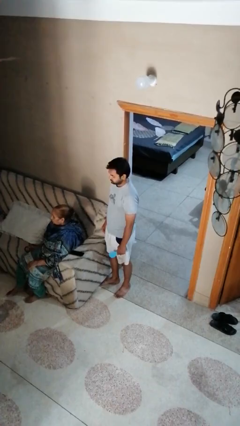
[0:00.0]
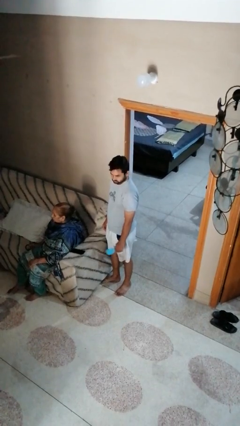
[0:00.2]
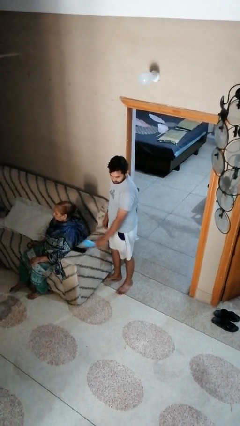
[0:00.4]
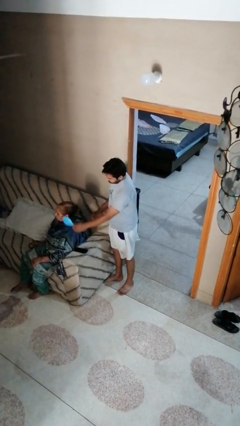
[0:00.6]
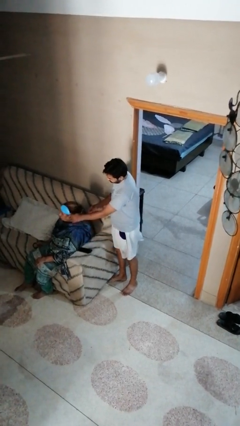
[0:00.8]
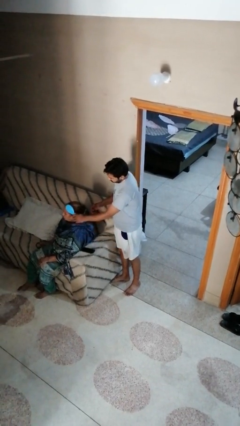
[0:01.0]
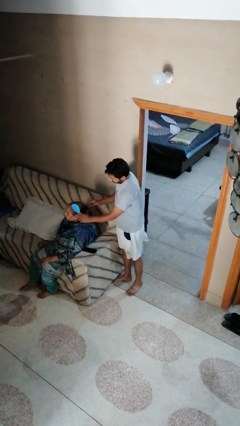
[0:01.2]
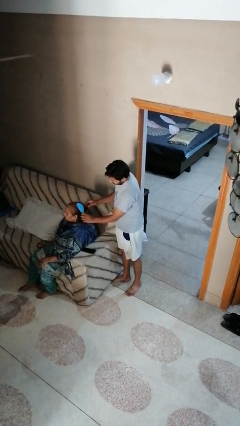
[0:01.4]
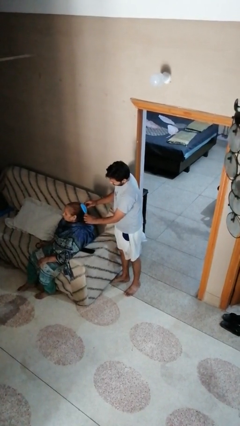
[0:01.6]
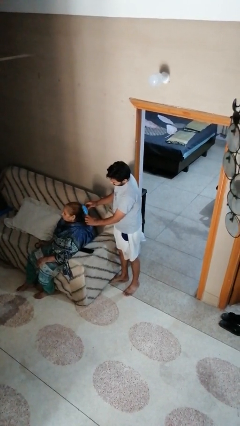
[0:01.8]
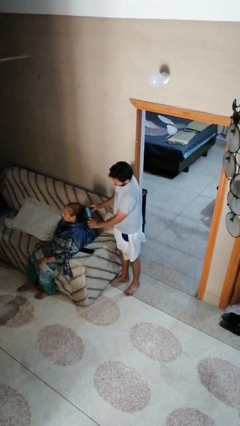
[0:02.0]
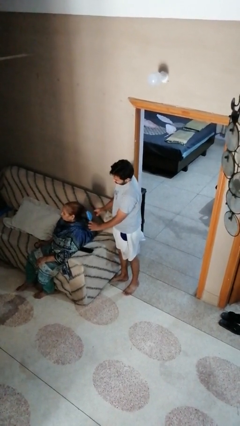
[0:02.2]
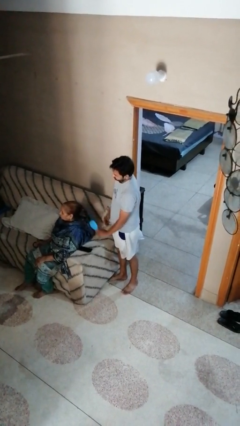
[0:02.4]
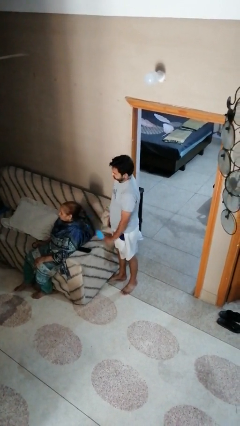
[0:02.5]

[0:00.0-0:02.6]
person brushes hair of person

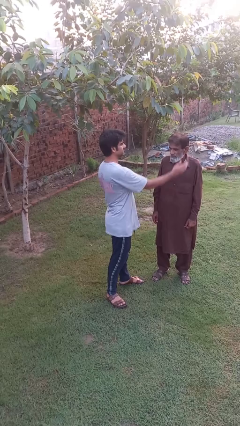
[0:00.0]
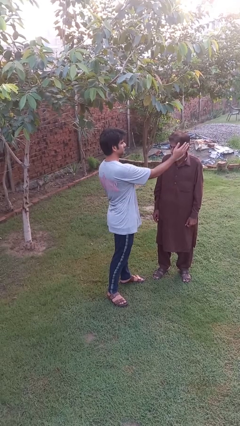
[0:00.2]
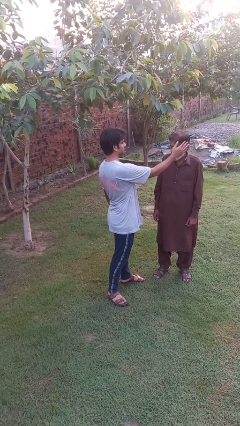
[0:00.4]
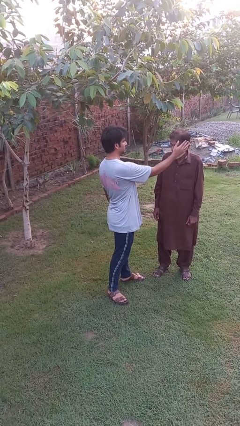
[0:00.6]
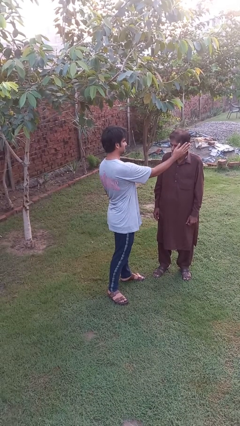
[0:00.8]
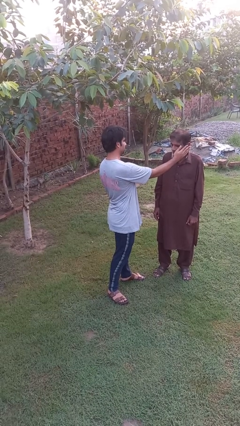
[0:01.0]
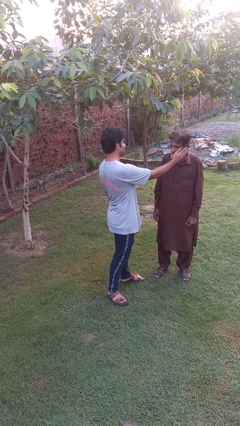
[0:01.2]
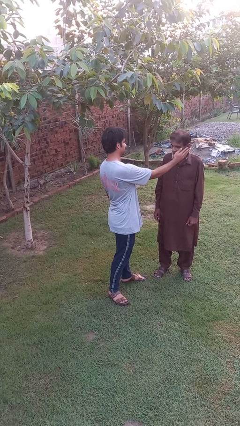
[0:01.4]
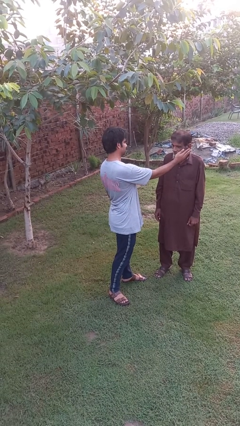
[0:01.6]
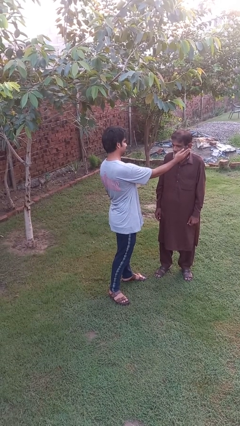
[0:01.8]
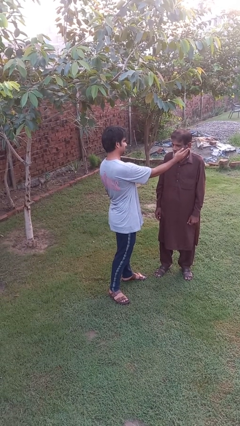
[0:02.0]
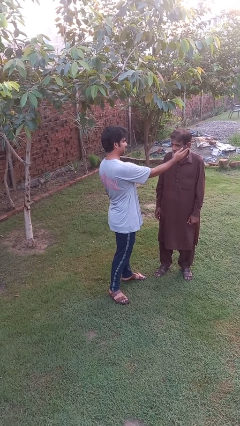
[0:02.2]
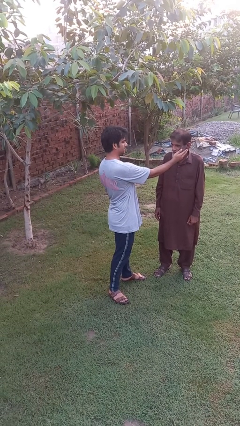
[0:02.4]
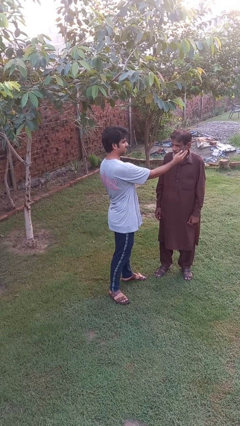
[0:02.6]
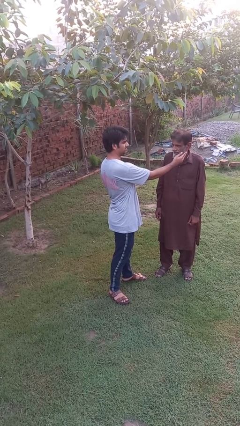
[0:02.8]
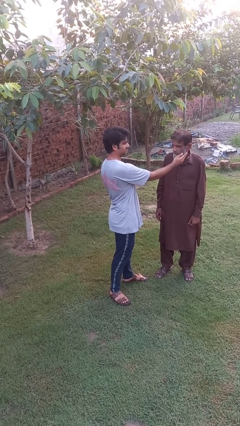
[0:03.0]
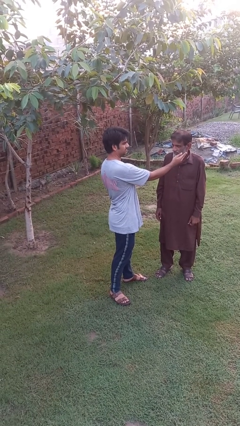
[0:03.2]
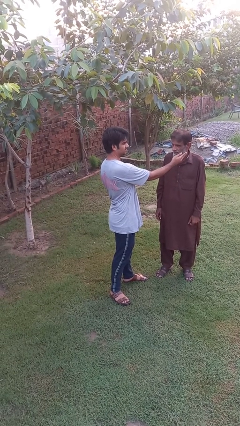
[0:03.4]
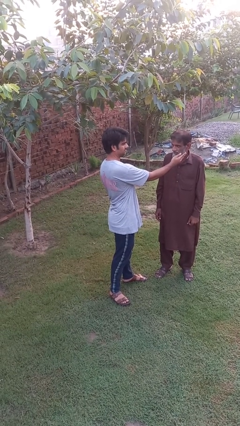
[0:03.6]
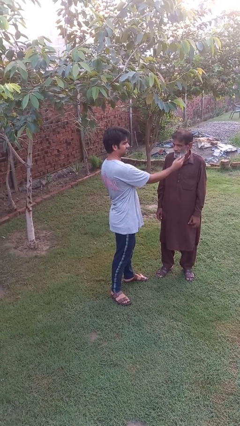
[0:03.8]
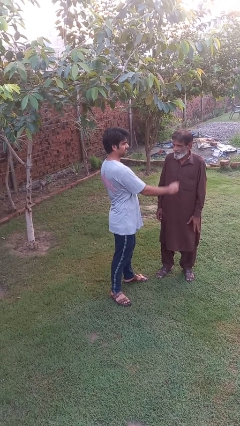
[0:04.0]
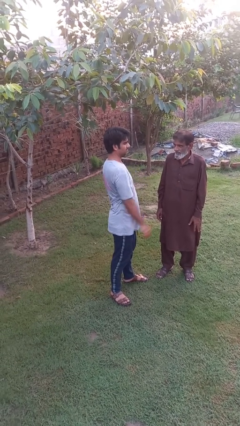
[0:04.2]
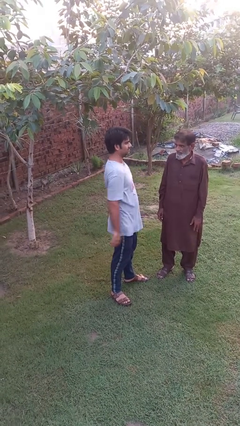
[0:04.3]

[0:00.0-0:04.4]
person touches face of person

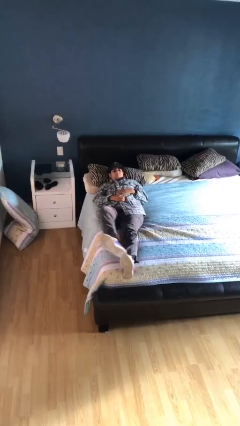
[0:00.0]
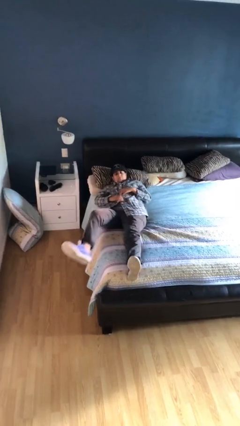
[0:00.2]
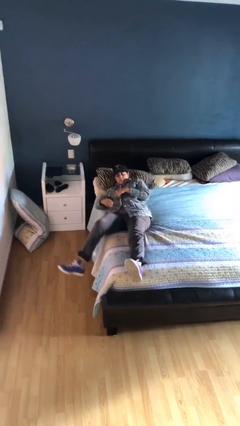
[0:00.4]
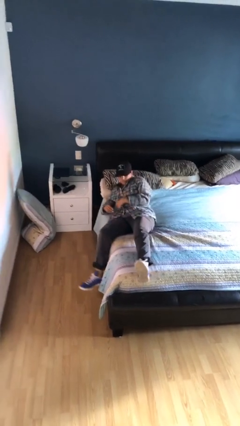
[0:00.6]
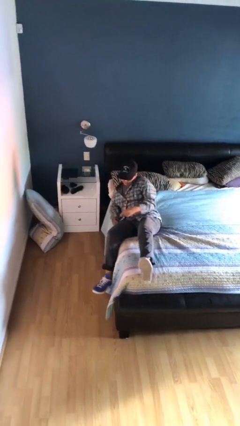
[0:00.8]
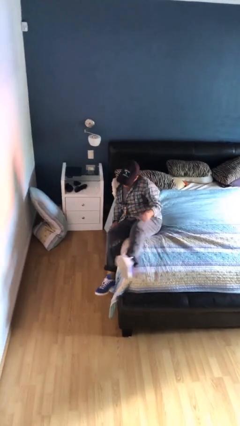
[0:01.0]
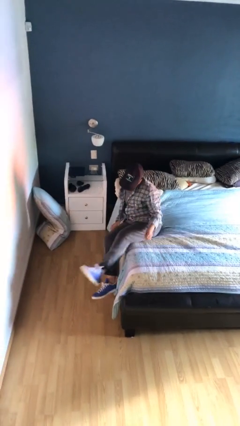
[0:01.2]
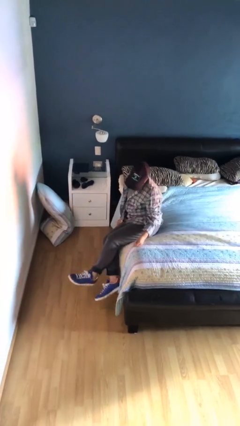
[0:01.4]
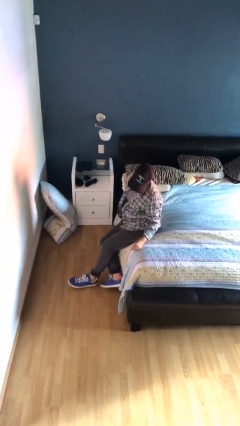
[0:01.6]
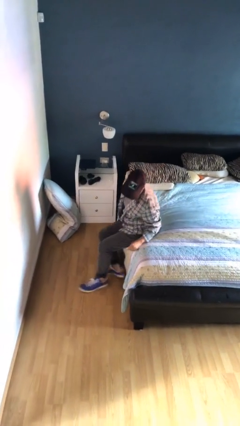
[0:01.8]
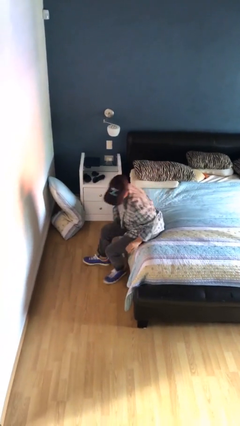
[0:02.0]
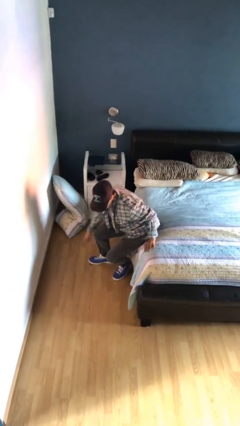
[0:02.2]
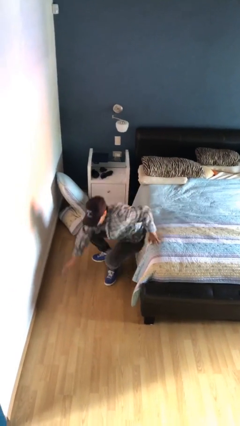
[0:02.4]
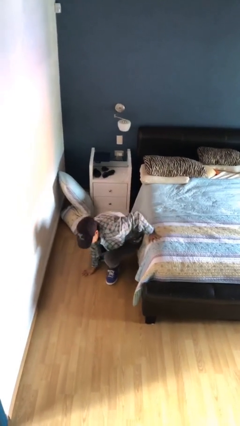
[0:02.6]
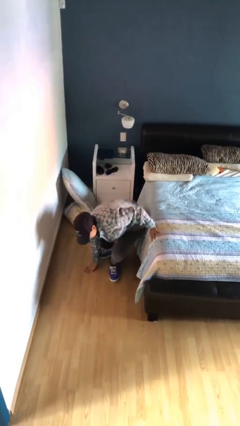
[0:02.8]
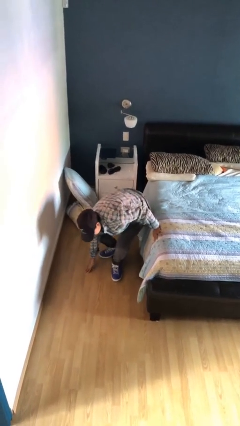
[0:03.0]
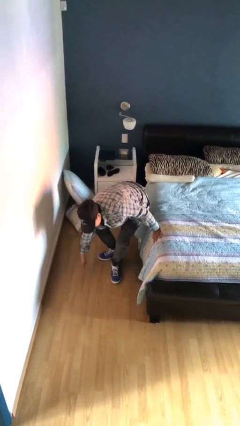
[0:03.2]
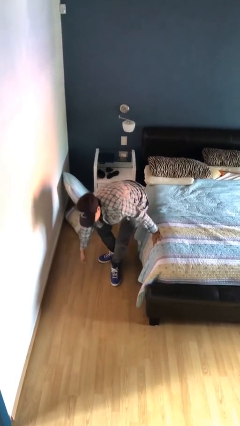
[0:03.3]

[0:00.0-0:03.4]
person falls from bed

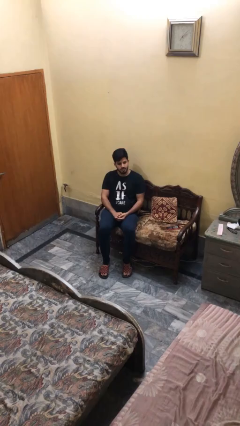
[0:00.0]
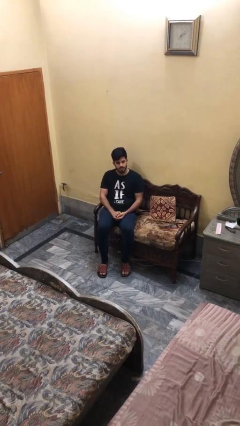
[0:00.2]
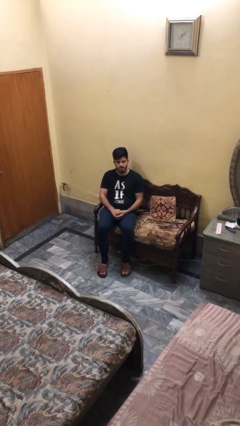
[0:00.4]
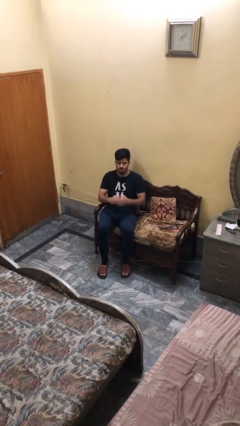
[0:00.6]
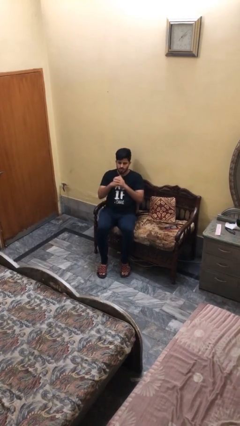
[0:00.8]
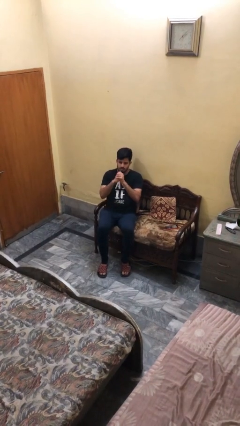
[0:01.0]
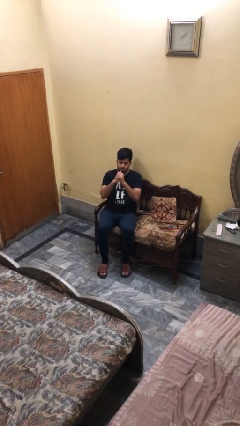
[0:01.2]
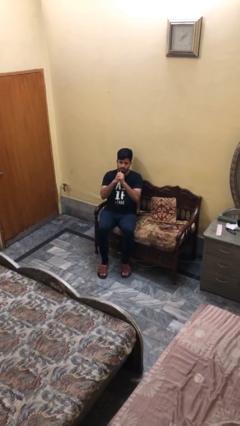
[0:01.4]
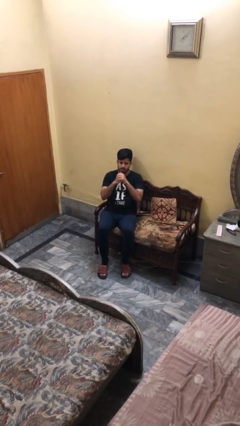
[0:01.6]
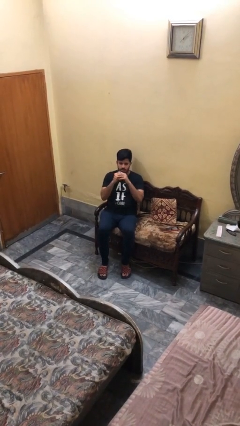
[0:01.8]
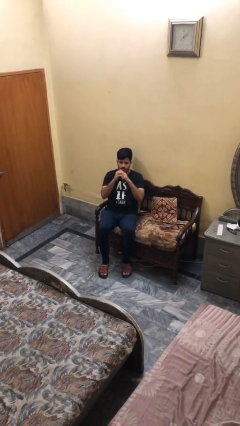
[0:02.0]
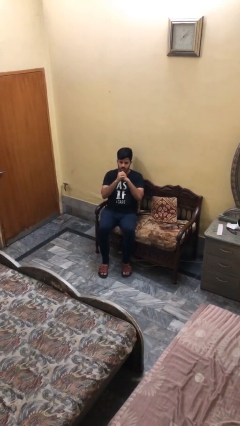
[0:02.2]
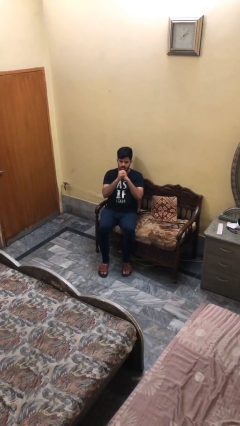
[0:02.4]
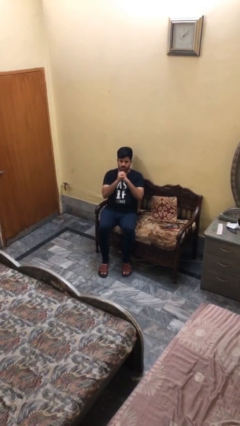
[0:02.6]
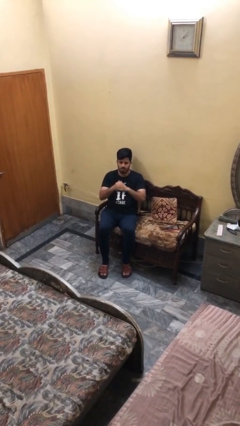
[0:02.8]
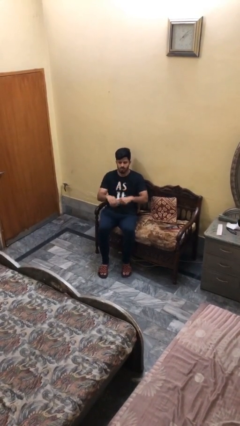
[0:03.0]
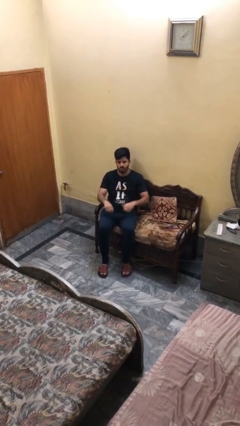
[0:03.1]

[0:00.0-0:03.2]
person cracks knuckles

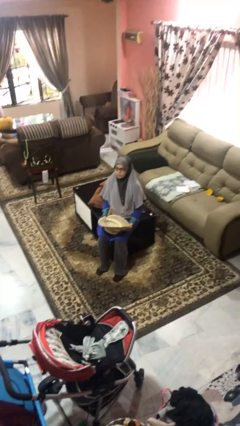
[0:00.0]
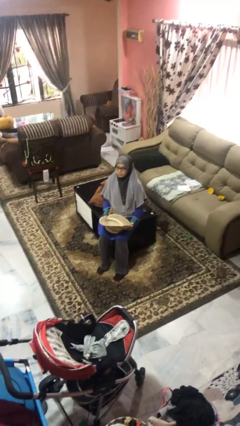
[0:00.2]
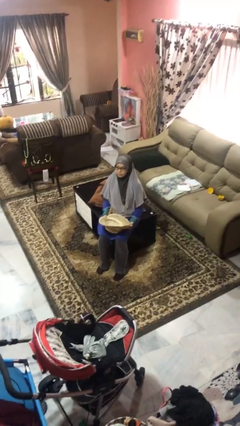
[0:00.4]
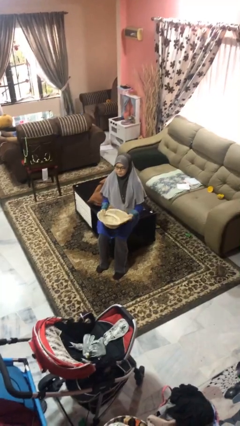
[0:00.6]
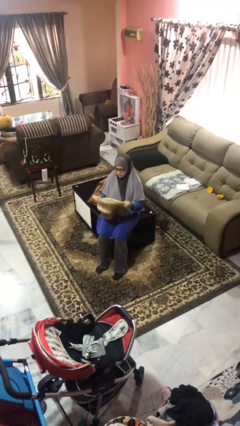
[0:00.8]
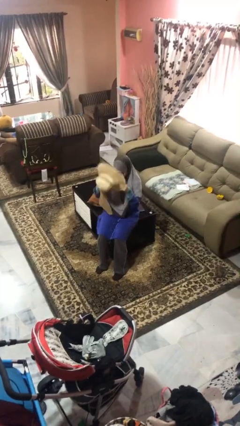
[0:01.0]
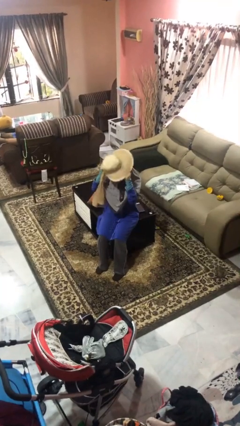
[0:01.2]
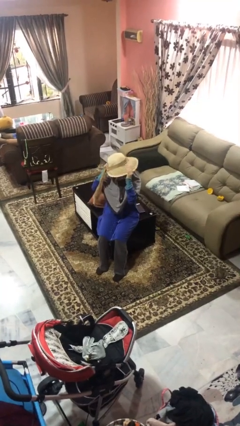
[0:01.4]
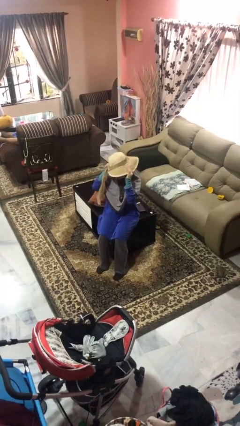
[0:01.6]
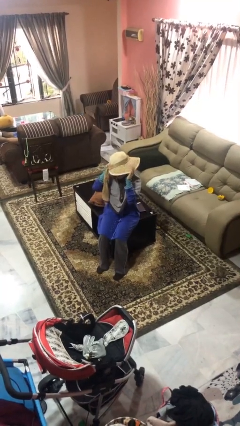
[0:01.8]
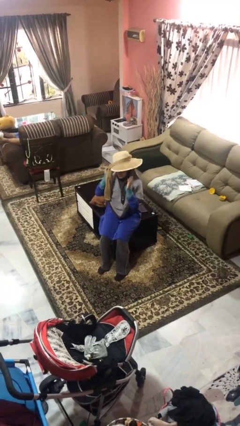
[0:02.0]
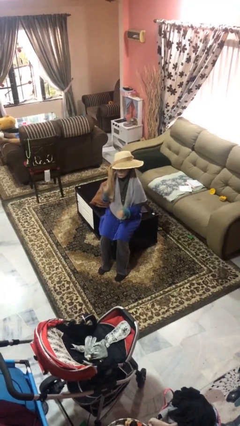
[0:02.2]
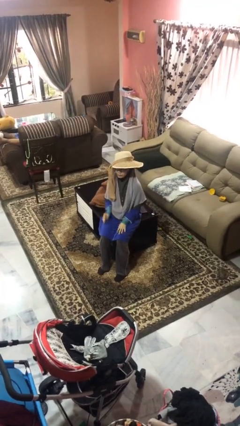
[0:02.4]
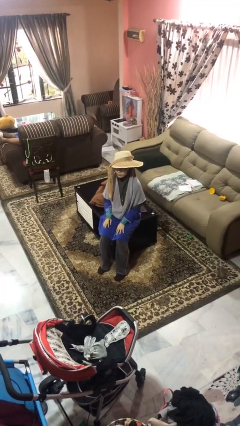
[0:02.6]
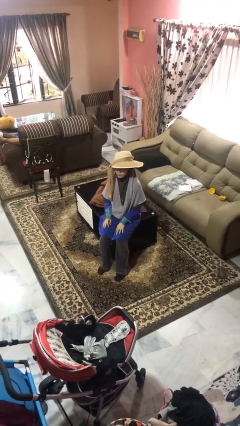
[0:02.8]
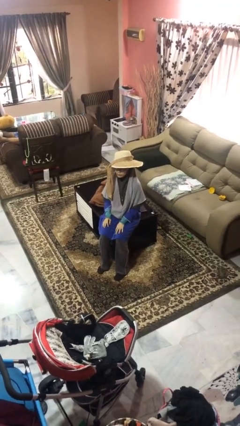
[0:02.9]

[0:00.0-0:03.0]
person puts on hat

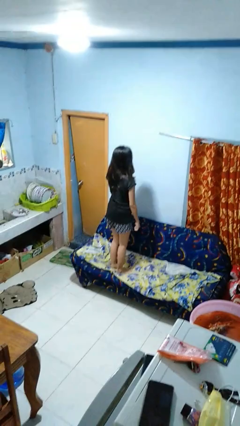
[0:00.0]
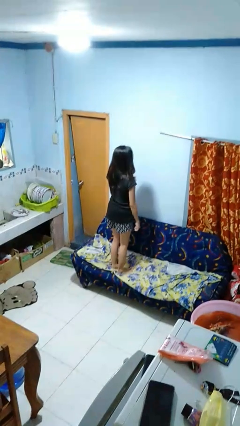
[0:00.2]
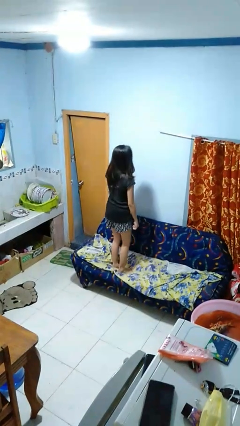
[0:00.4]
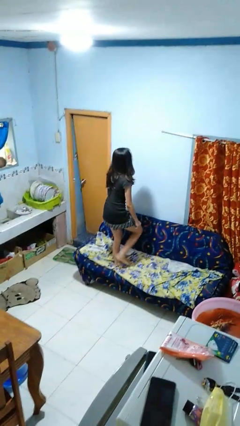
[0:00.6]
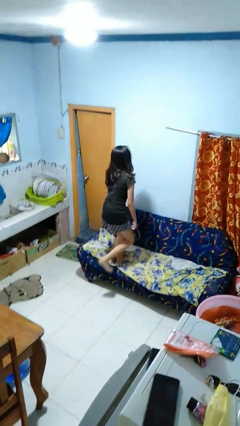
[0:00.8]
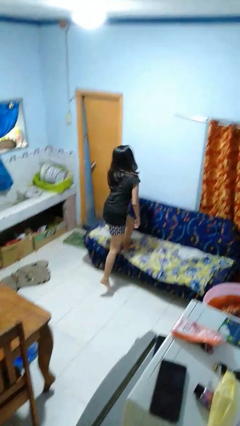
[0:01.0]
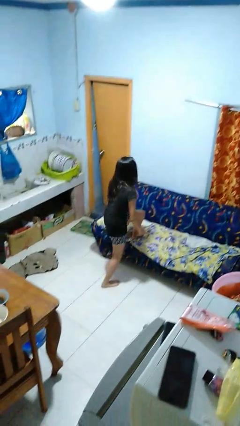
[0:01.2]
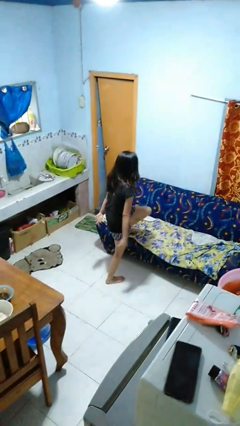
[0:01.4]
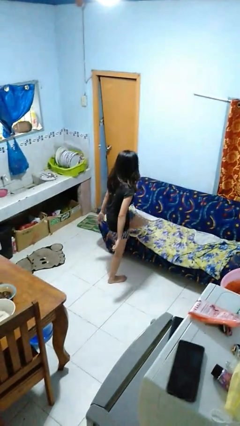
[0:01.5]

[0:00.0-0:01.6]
person climbs off couch
